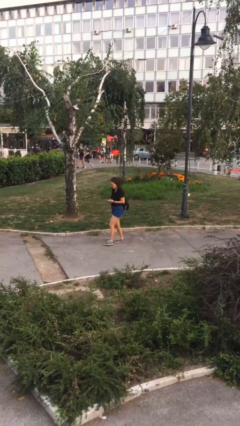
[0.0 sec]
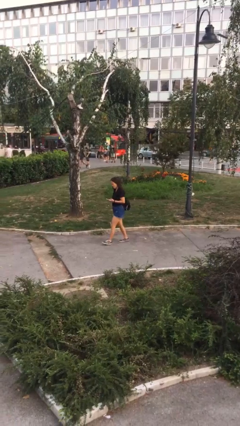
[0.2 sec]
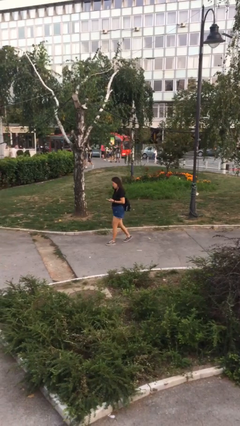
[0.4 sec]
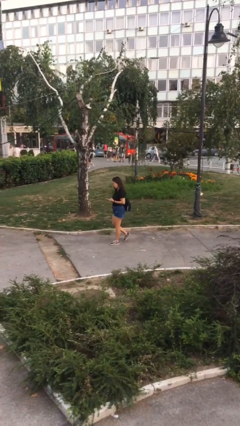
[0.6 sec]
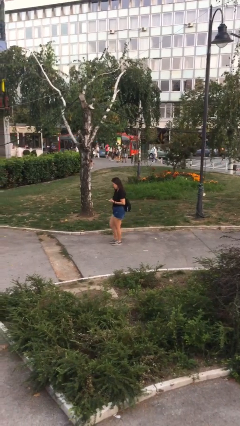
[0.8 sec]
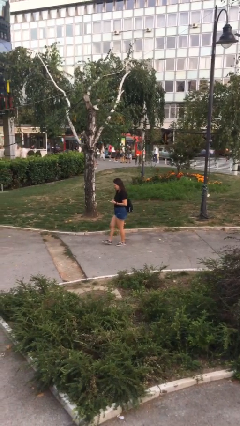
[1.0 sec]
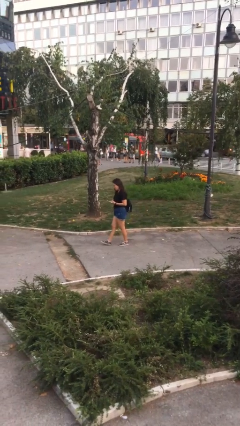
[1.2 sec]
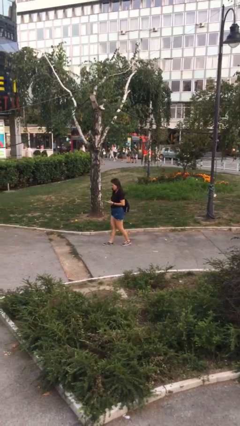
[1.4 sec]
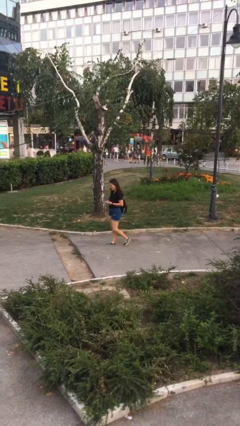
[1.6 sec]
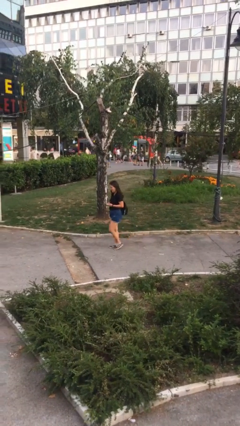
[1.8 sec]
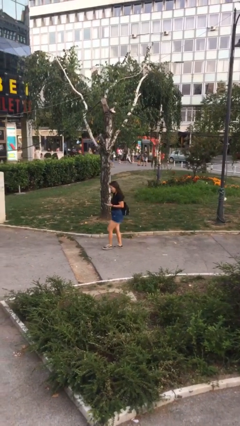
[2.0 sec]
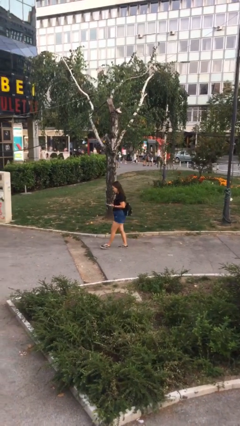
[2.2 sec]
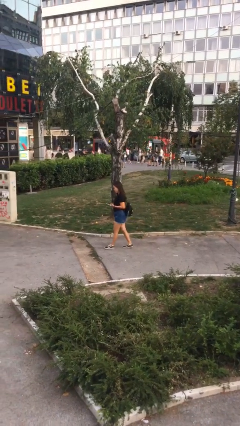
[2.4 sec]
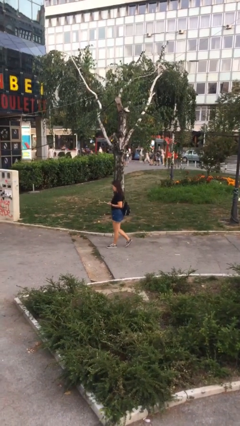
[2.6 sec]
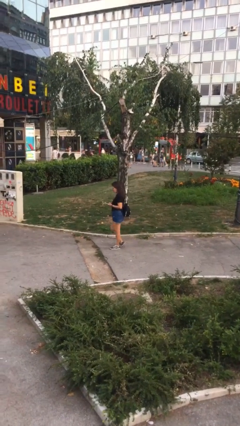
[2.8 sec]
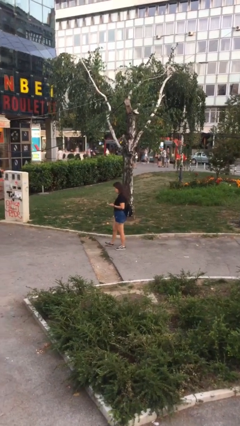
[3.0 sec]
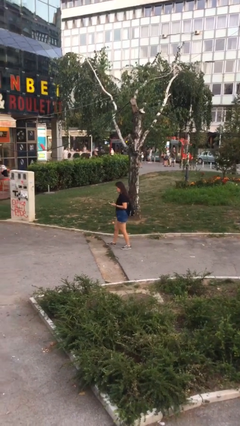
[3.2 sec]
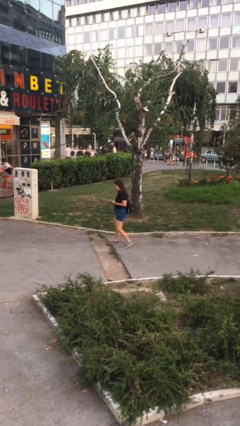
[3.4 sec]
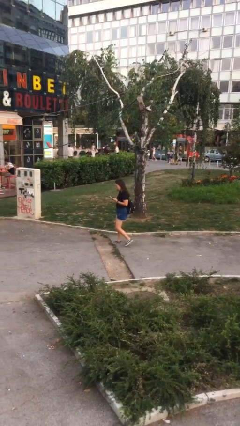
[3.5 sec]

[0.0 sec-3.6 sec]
person texts on phone

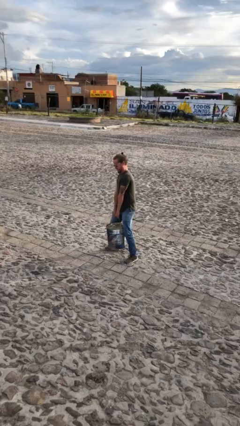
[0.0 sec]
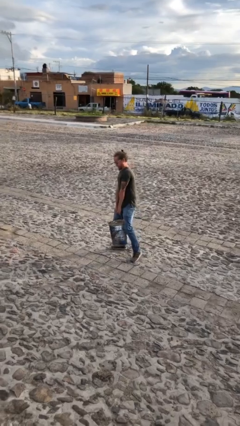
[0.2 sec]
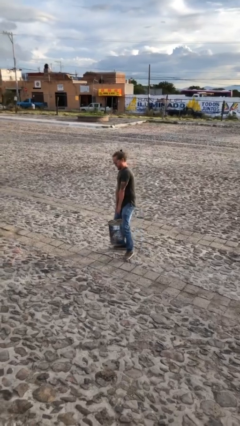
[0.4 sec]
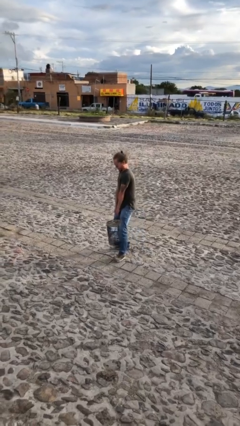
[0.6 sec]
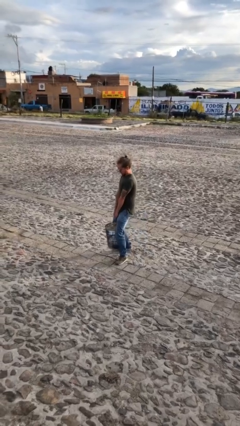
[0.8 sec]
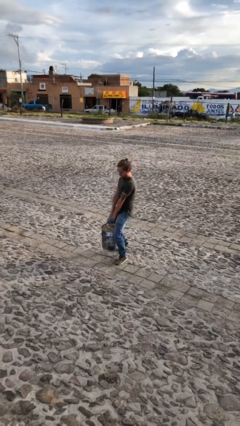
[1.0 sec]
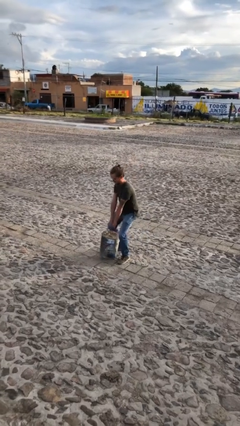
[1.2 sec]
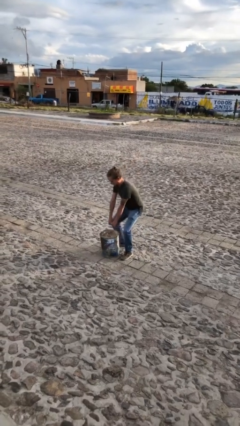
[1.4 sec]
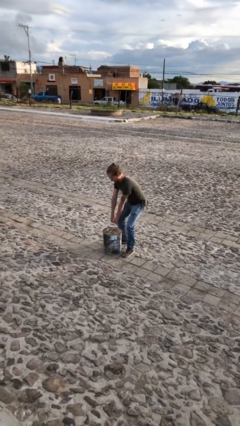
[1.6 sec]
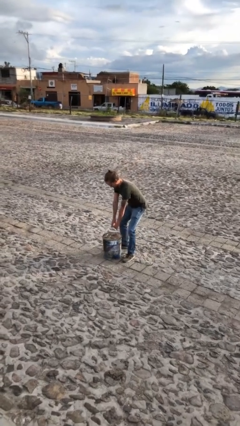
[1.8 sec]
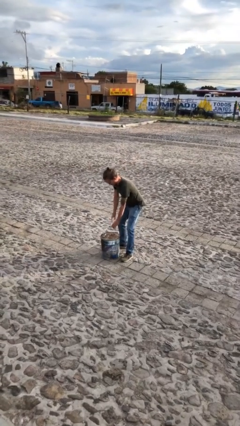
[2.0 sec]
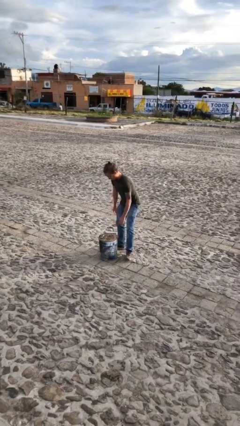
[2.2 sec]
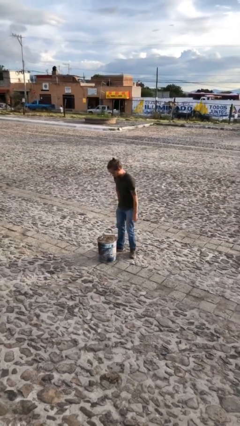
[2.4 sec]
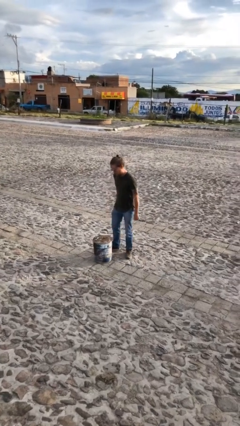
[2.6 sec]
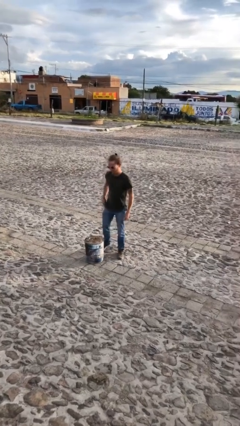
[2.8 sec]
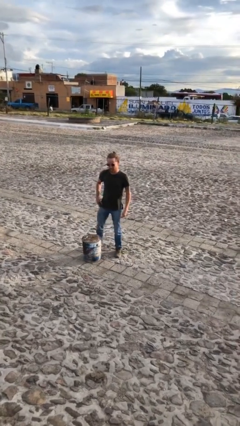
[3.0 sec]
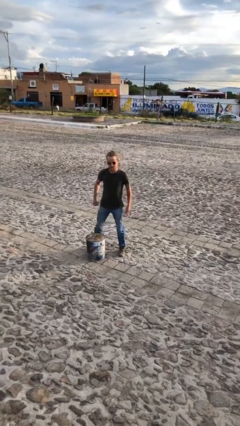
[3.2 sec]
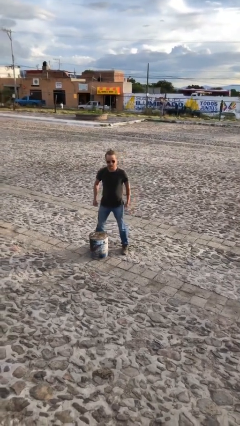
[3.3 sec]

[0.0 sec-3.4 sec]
person puts down object on floor

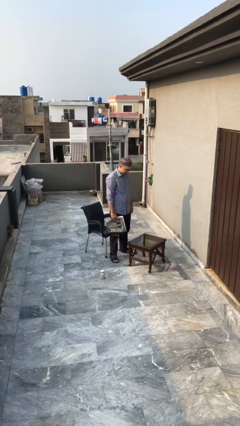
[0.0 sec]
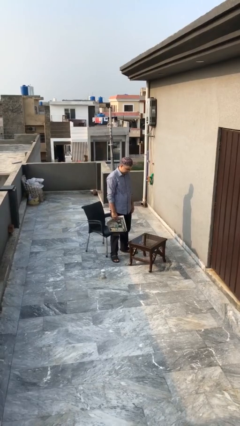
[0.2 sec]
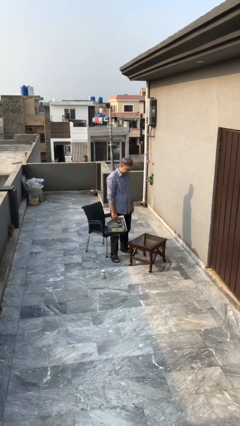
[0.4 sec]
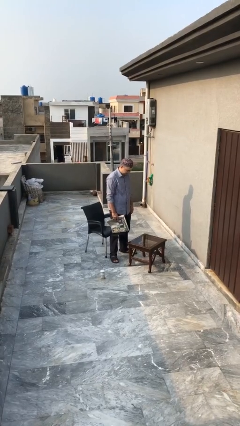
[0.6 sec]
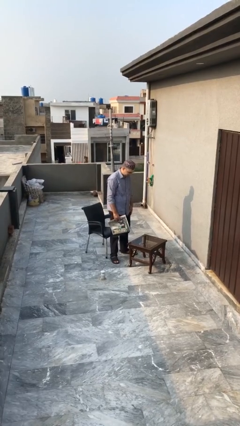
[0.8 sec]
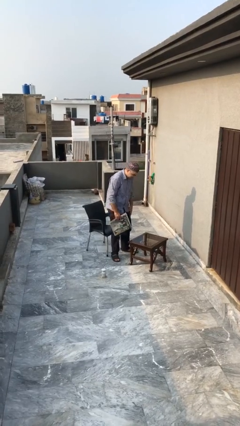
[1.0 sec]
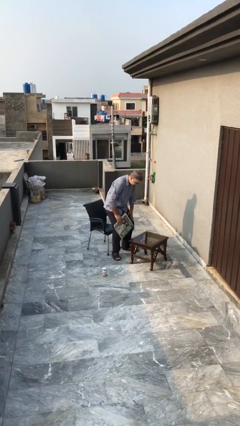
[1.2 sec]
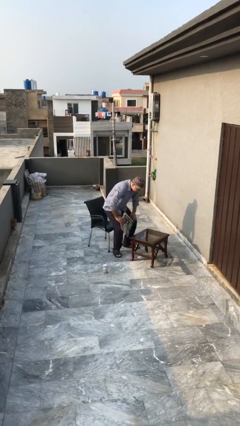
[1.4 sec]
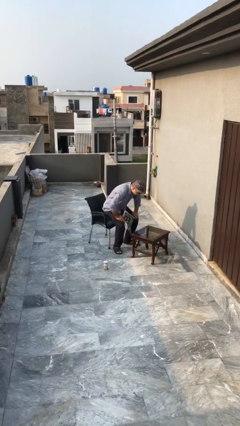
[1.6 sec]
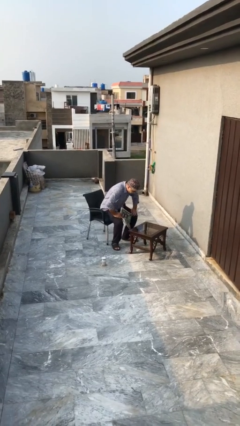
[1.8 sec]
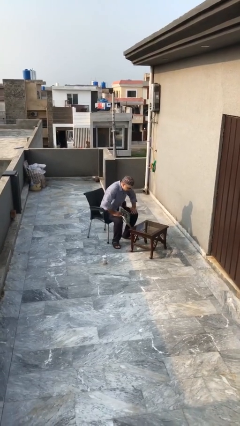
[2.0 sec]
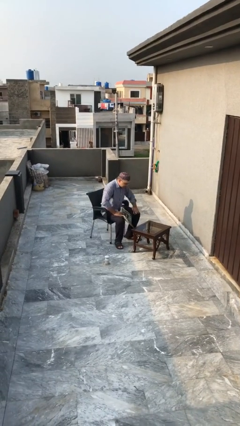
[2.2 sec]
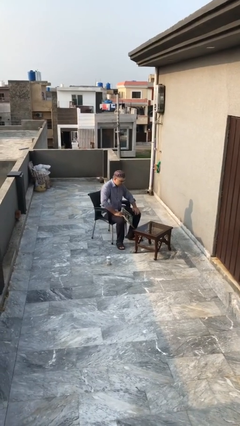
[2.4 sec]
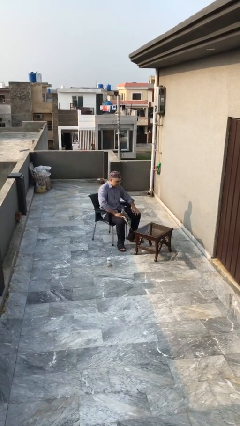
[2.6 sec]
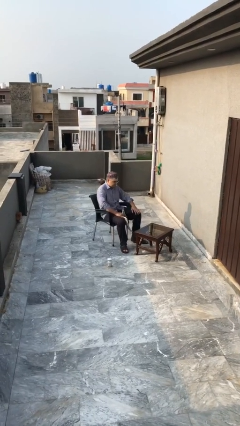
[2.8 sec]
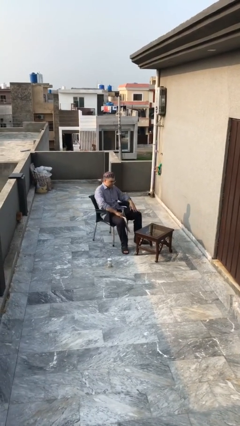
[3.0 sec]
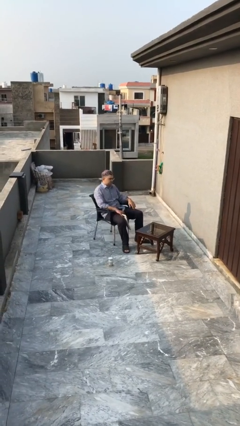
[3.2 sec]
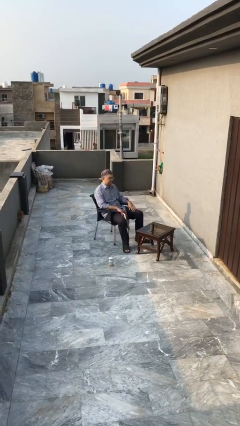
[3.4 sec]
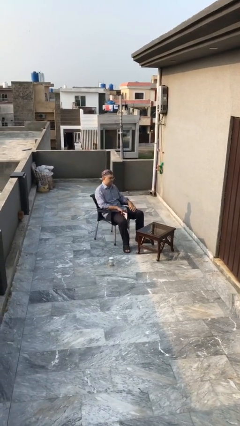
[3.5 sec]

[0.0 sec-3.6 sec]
person sits down

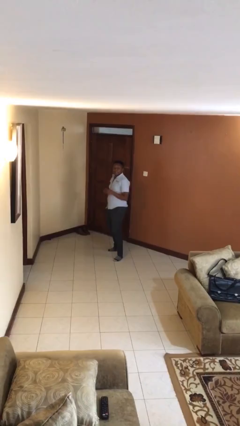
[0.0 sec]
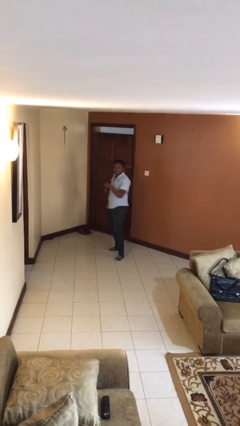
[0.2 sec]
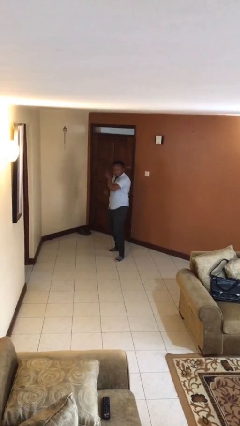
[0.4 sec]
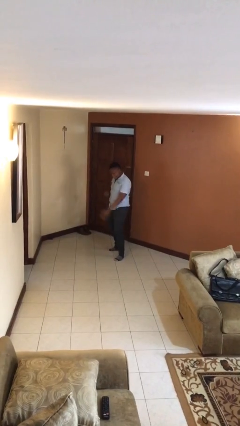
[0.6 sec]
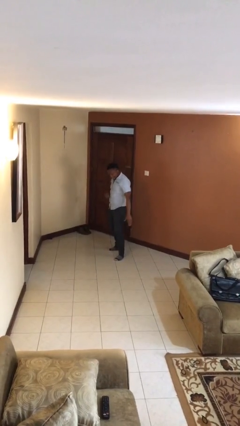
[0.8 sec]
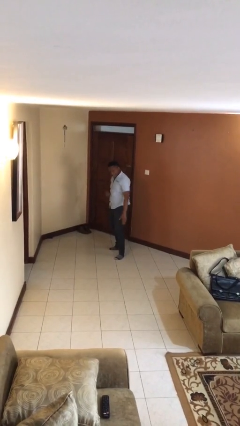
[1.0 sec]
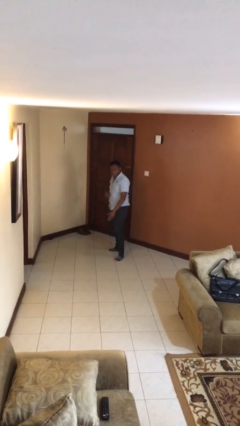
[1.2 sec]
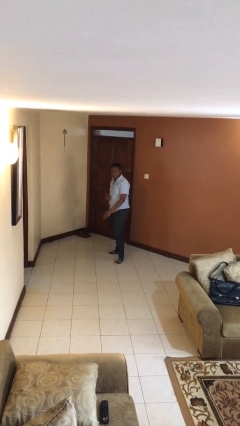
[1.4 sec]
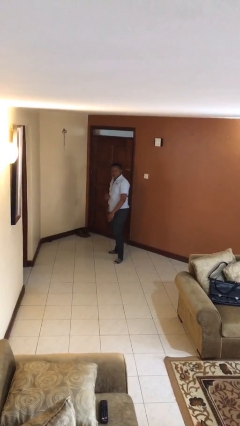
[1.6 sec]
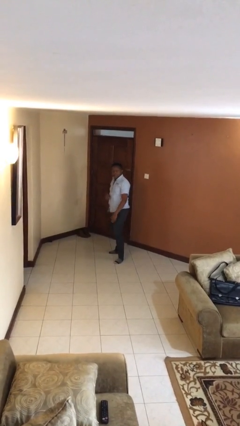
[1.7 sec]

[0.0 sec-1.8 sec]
person karate chop

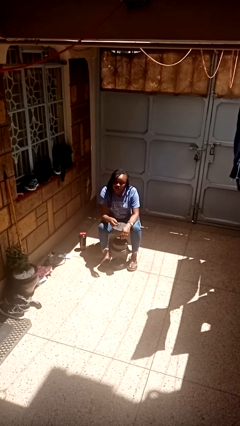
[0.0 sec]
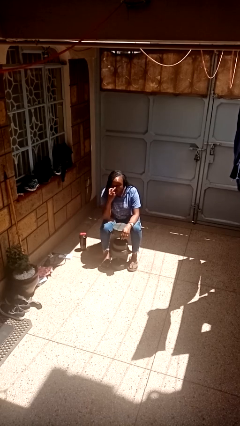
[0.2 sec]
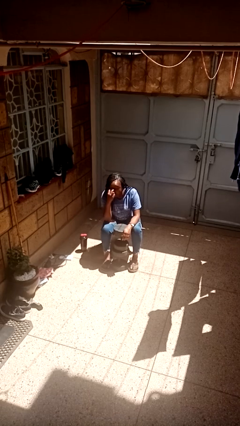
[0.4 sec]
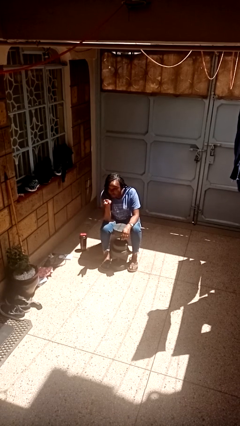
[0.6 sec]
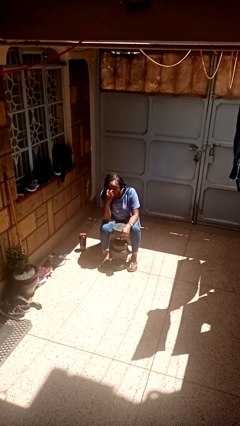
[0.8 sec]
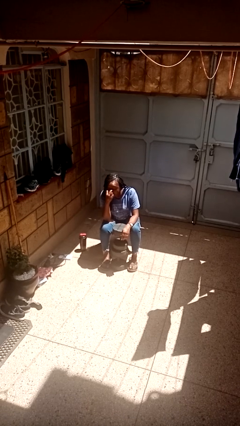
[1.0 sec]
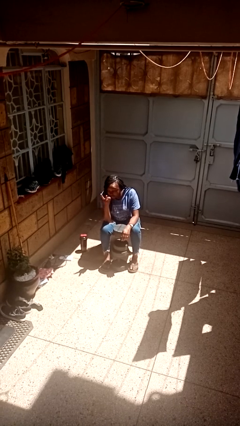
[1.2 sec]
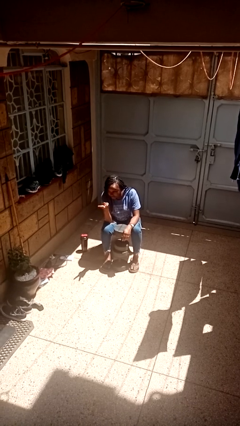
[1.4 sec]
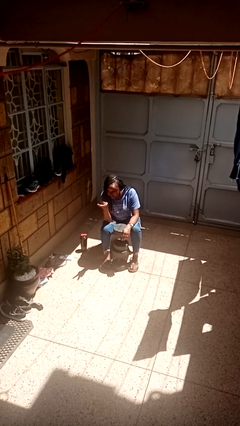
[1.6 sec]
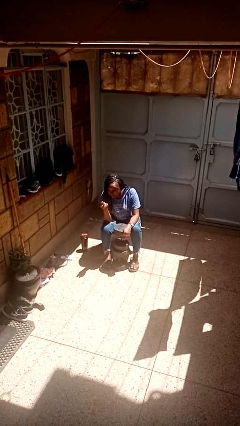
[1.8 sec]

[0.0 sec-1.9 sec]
person gestures watch closely

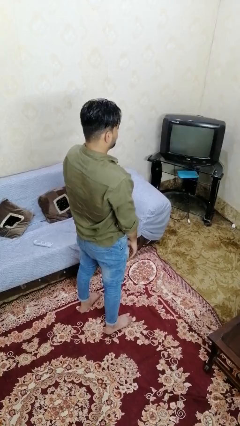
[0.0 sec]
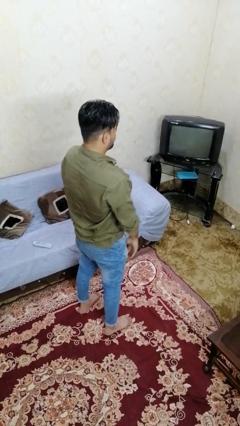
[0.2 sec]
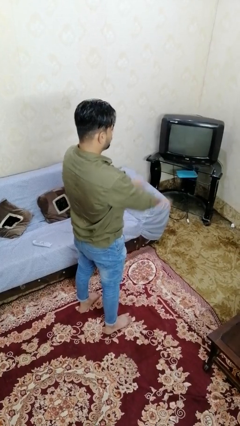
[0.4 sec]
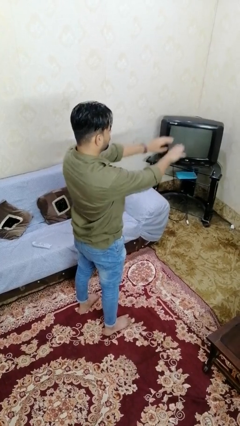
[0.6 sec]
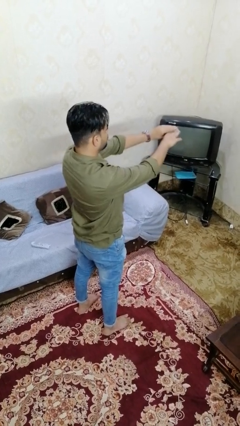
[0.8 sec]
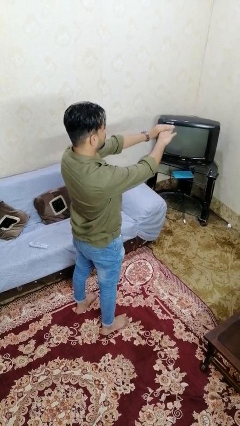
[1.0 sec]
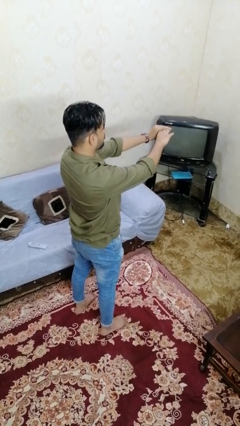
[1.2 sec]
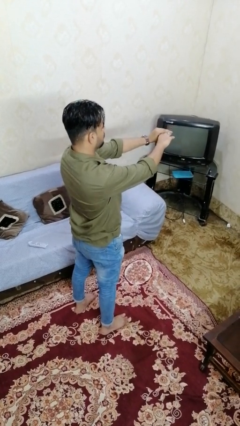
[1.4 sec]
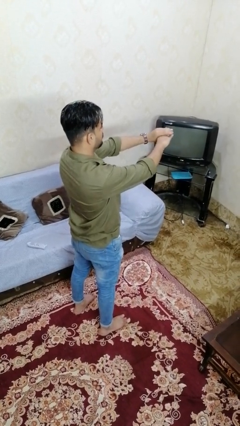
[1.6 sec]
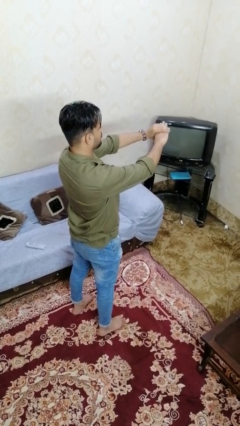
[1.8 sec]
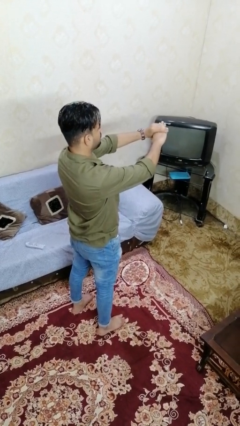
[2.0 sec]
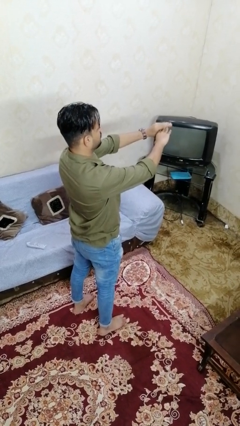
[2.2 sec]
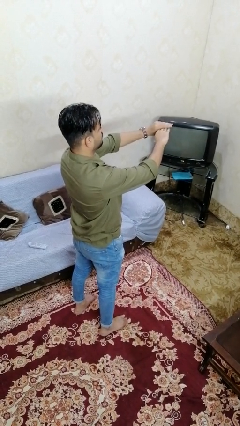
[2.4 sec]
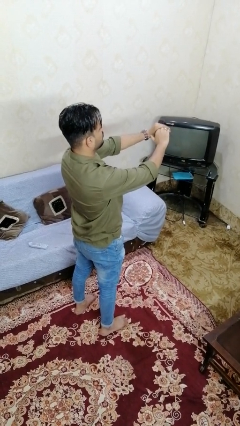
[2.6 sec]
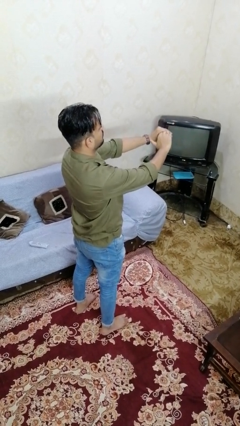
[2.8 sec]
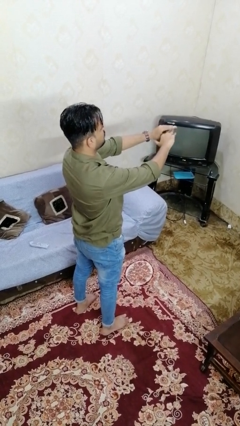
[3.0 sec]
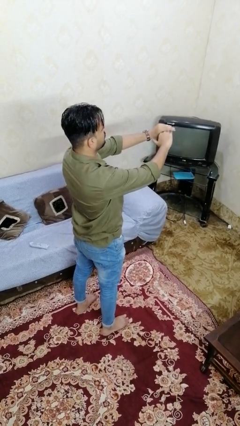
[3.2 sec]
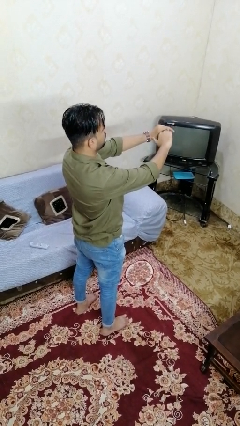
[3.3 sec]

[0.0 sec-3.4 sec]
person cracks knuckles
